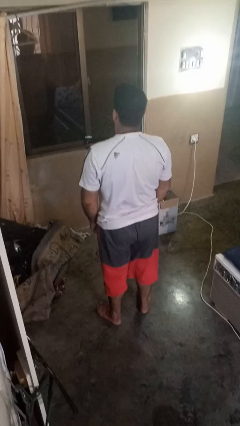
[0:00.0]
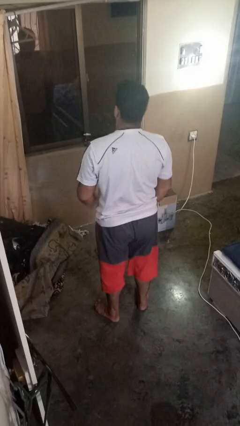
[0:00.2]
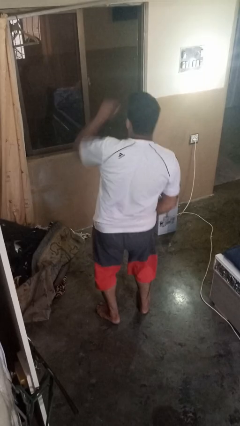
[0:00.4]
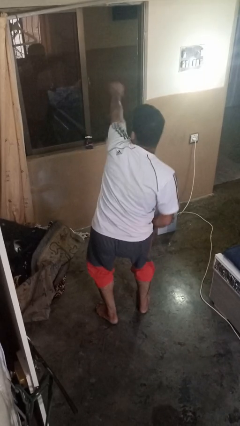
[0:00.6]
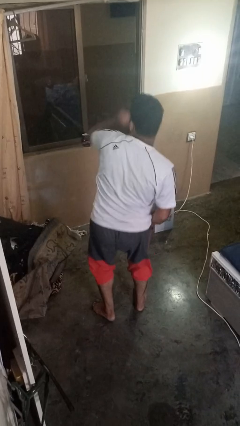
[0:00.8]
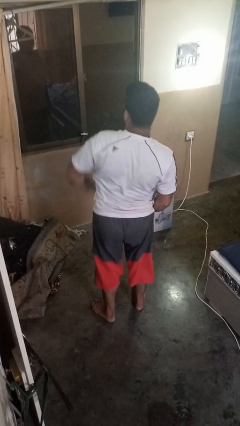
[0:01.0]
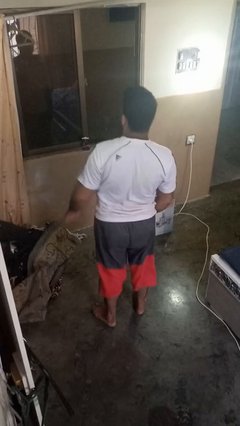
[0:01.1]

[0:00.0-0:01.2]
person karate chop

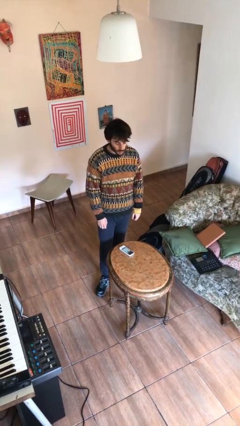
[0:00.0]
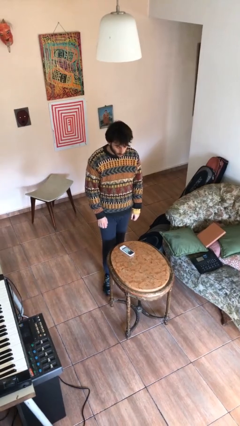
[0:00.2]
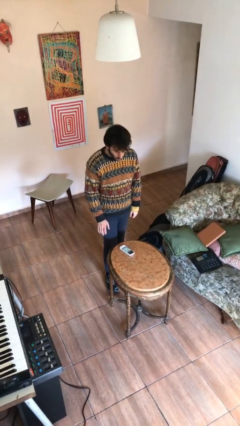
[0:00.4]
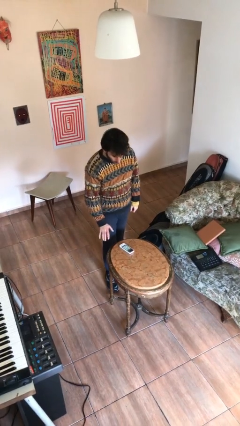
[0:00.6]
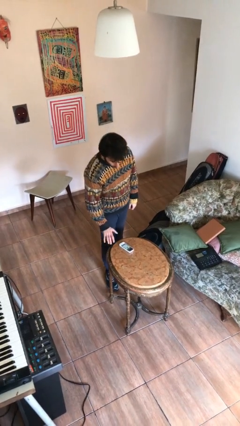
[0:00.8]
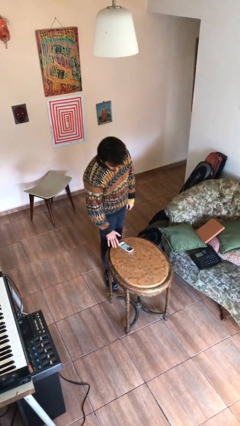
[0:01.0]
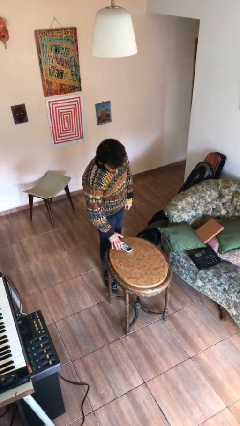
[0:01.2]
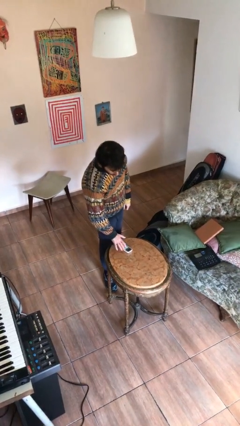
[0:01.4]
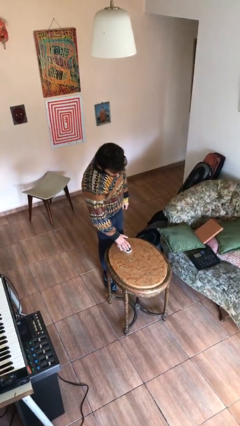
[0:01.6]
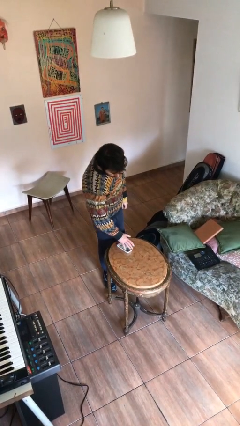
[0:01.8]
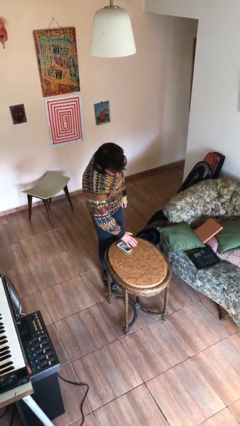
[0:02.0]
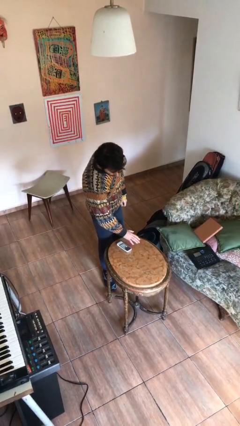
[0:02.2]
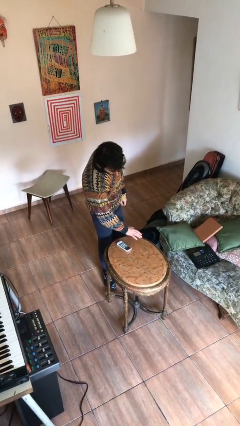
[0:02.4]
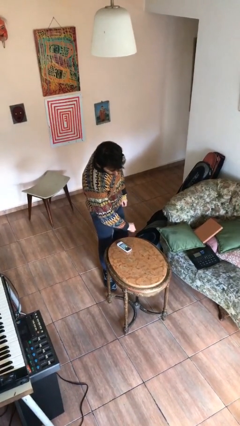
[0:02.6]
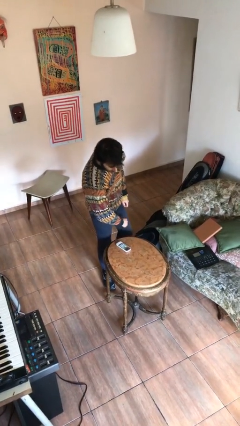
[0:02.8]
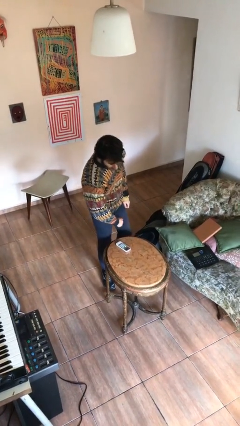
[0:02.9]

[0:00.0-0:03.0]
person waves hand over object

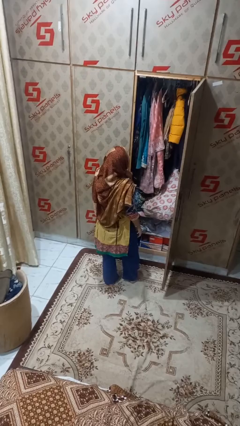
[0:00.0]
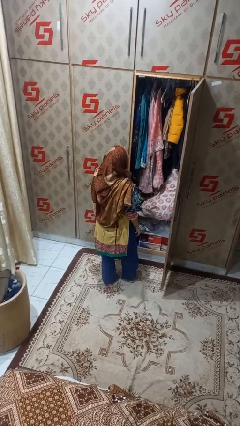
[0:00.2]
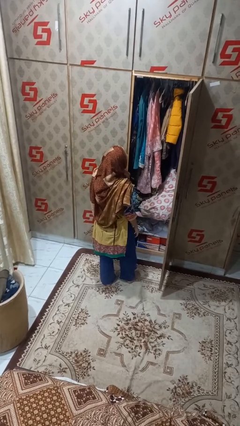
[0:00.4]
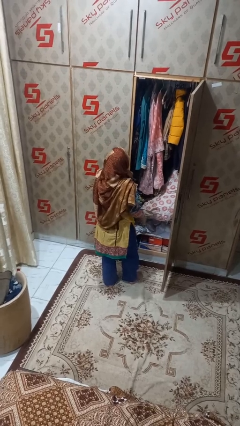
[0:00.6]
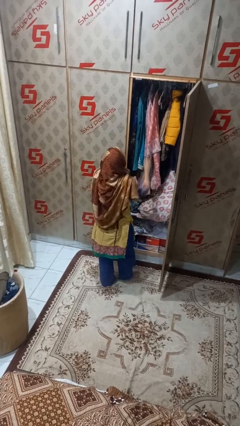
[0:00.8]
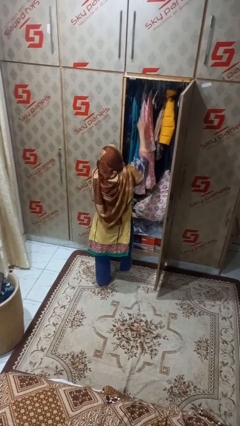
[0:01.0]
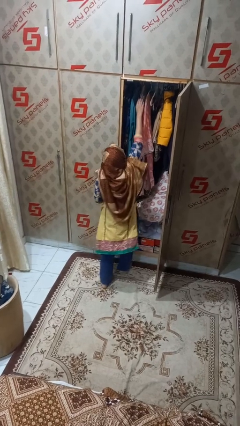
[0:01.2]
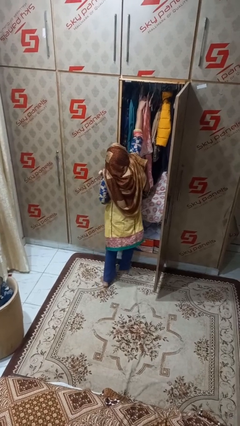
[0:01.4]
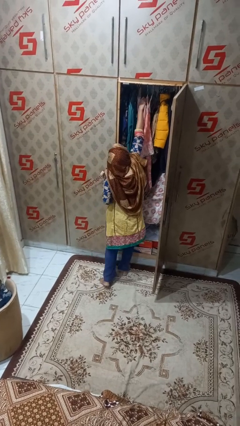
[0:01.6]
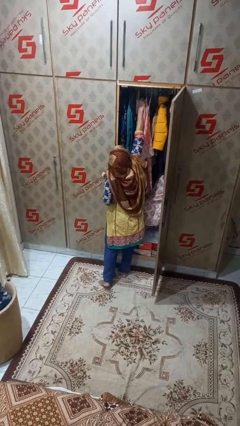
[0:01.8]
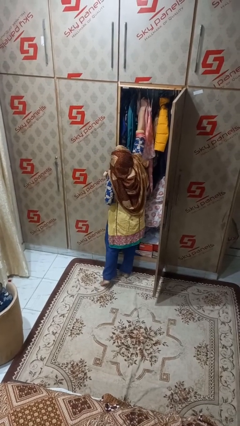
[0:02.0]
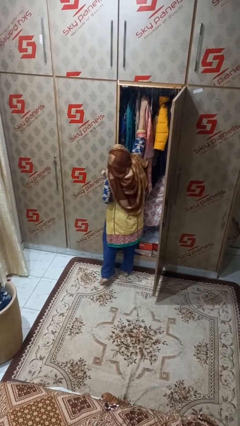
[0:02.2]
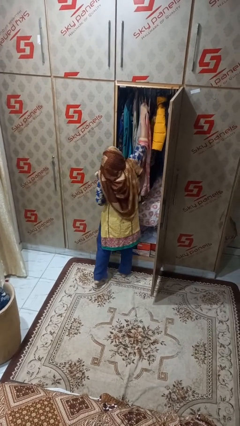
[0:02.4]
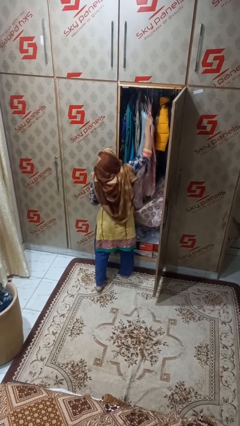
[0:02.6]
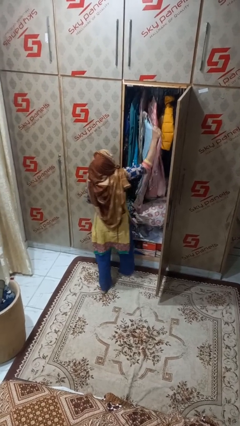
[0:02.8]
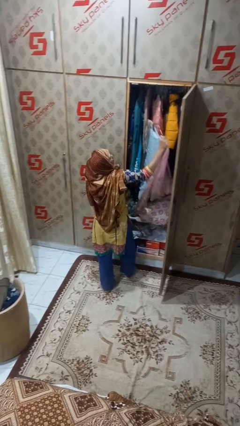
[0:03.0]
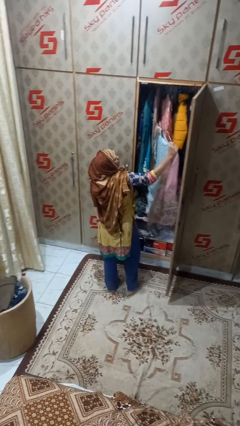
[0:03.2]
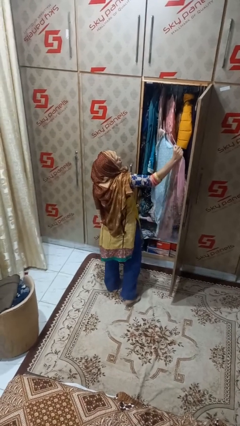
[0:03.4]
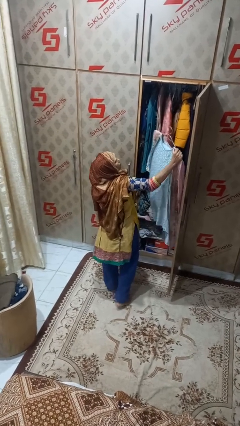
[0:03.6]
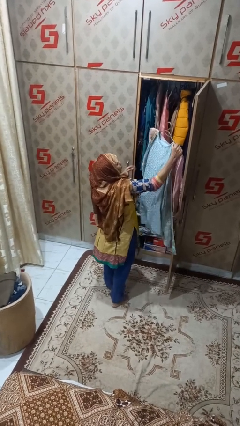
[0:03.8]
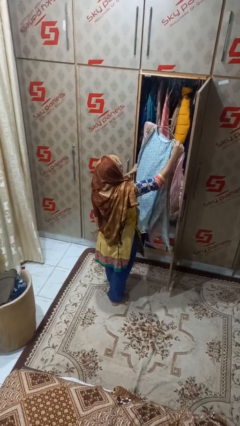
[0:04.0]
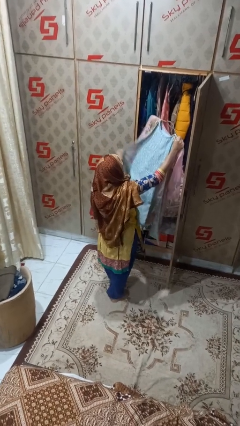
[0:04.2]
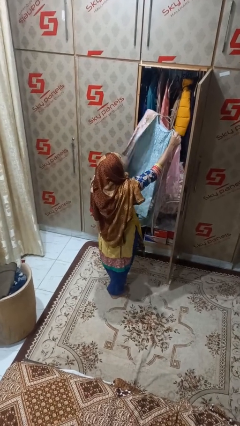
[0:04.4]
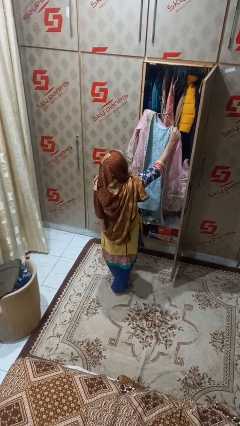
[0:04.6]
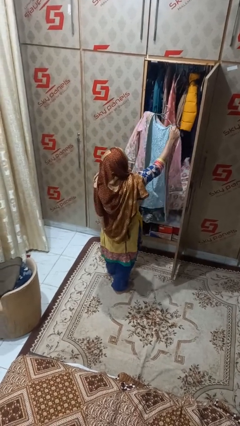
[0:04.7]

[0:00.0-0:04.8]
person takes clothes from closet

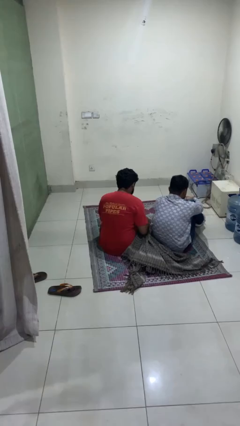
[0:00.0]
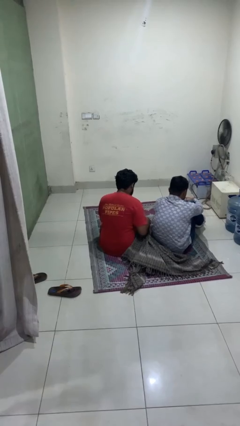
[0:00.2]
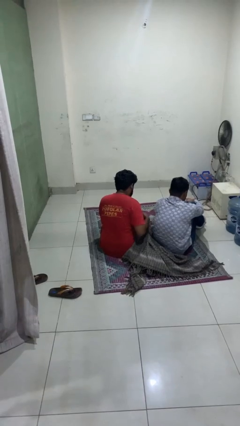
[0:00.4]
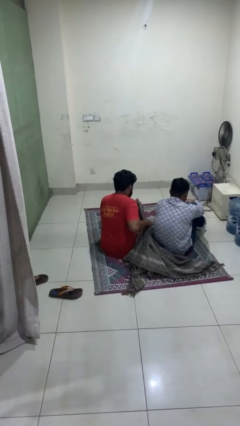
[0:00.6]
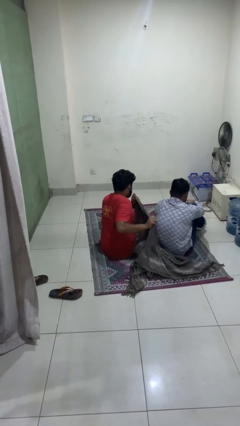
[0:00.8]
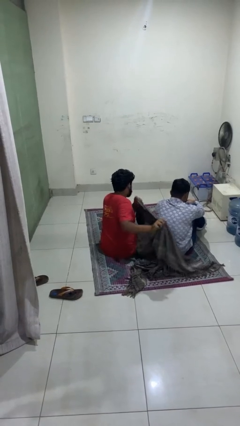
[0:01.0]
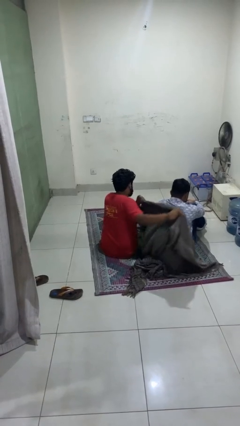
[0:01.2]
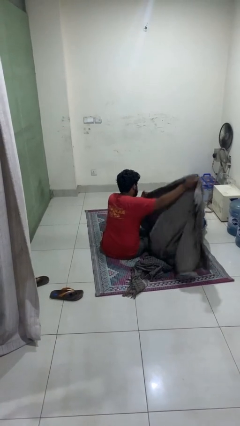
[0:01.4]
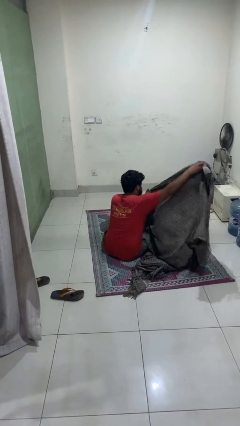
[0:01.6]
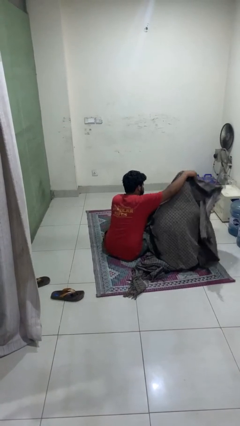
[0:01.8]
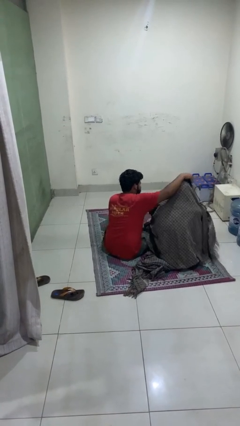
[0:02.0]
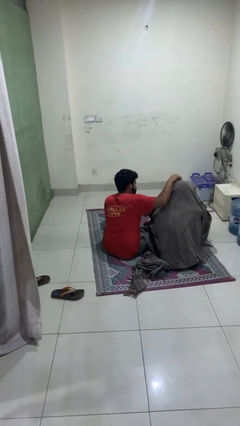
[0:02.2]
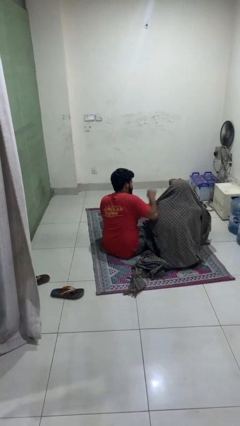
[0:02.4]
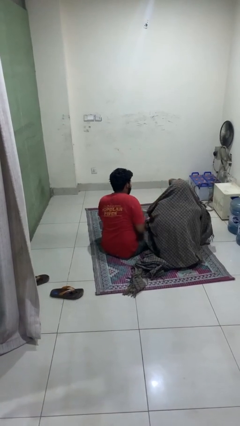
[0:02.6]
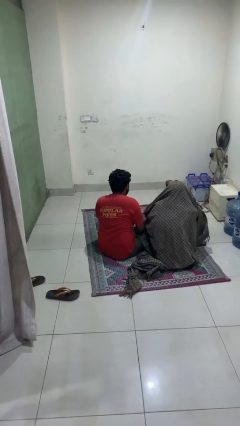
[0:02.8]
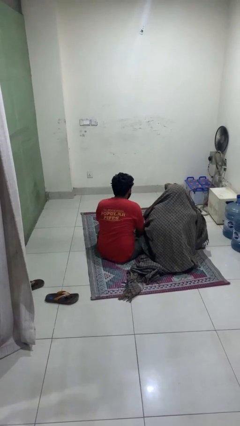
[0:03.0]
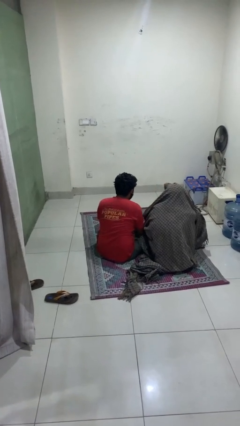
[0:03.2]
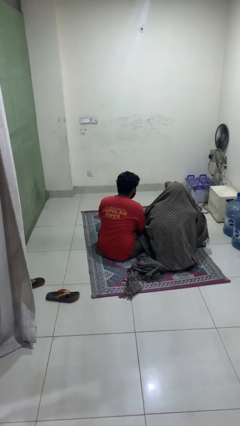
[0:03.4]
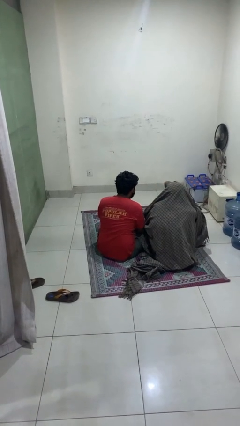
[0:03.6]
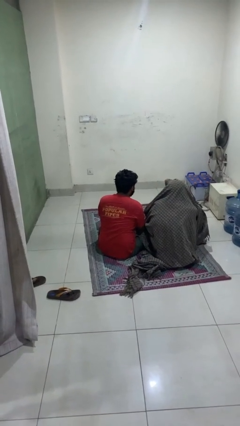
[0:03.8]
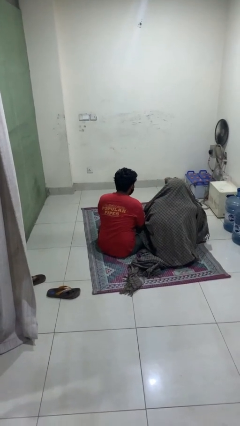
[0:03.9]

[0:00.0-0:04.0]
person covers friend with blanket

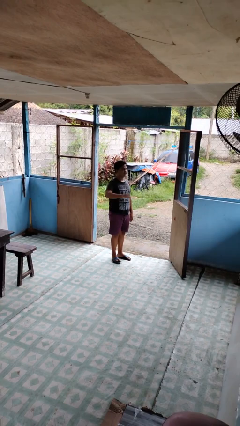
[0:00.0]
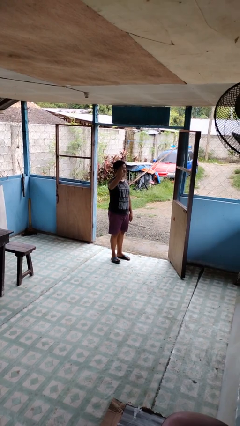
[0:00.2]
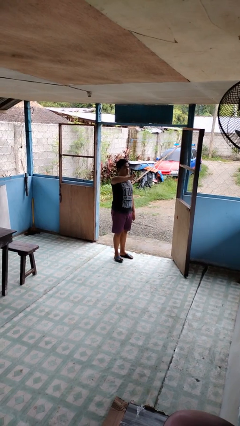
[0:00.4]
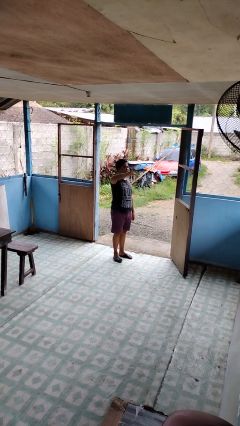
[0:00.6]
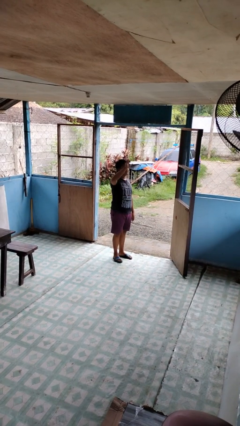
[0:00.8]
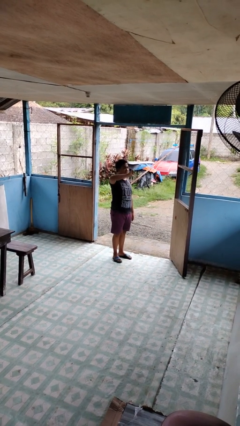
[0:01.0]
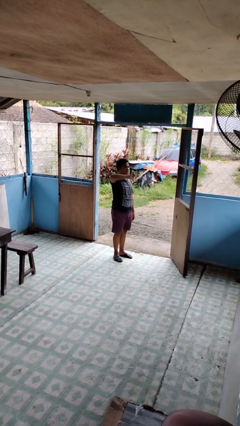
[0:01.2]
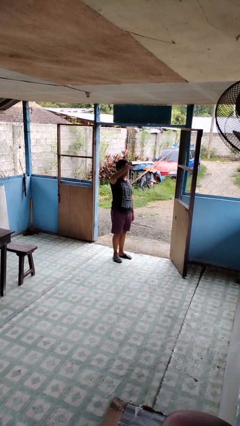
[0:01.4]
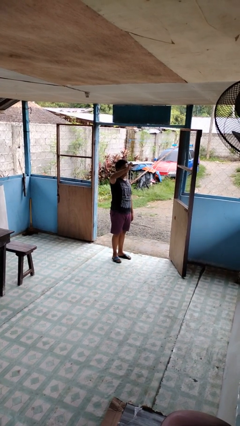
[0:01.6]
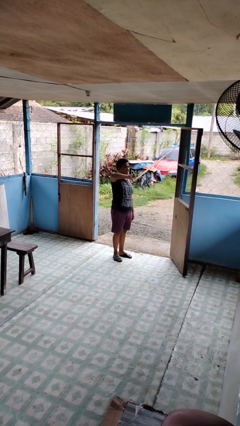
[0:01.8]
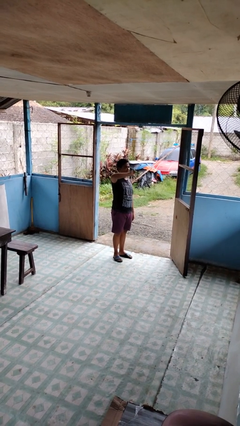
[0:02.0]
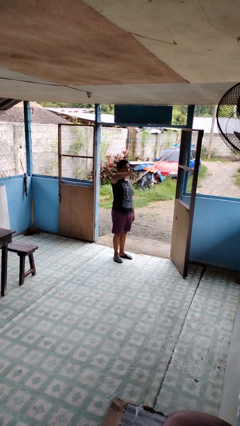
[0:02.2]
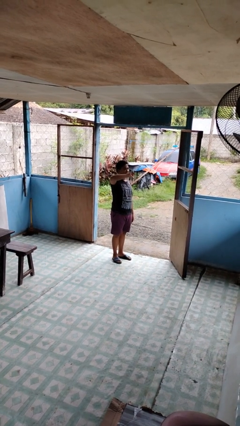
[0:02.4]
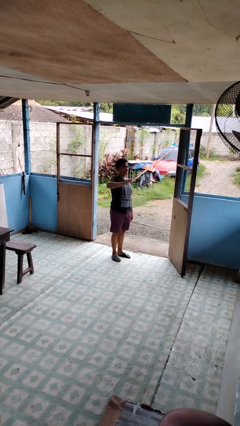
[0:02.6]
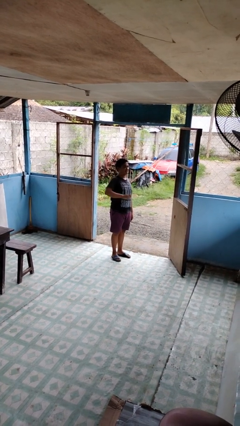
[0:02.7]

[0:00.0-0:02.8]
person gestures thumbs down

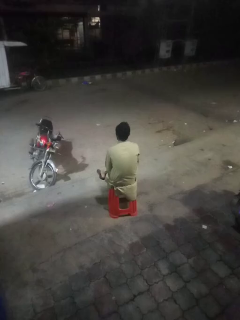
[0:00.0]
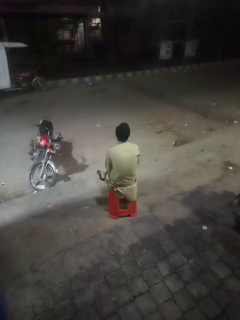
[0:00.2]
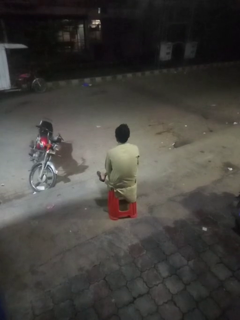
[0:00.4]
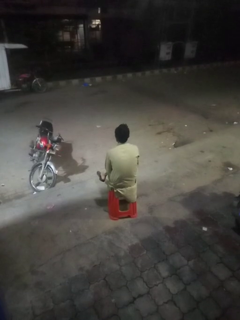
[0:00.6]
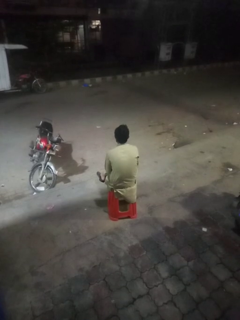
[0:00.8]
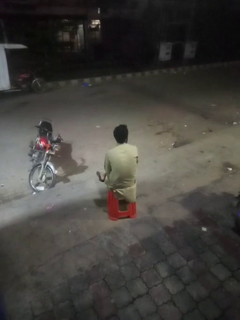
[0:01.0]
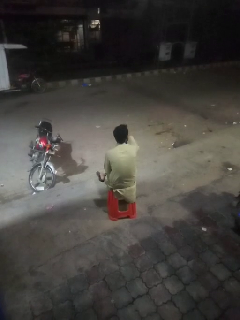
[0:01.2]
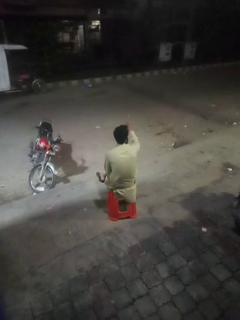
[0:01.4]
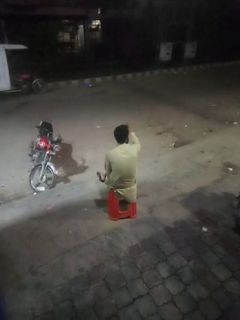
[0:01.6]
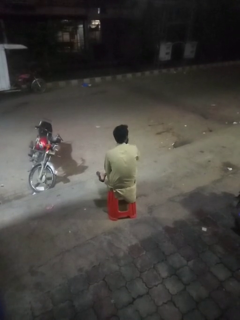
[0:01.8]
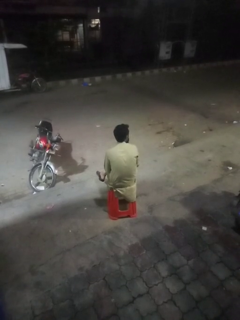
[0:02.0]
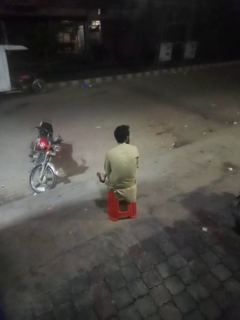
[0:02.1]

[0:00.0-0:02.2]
person gestures number one
